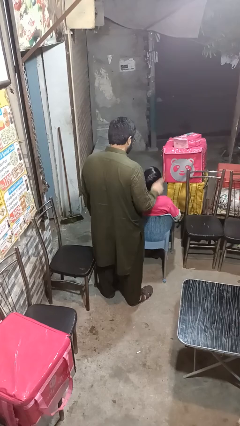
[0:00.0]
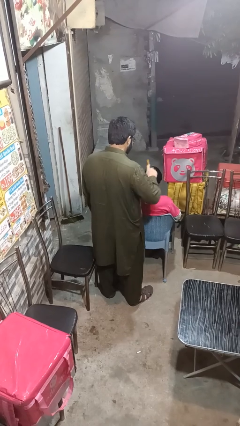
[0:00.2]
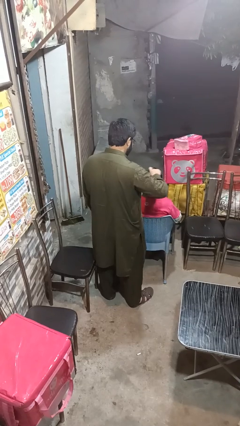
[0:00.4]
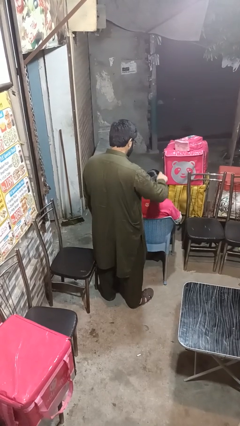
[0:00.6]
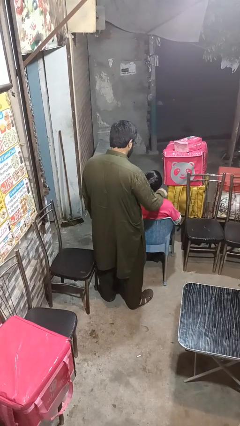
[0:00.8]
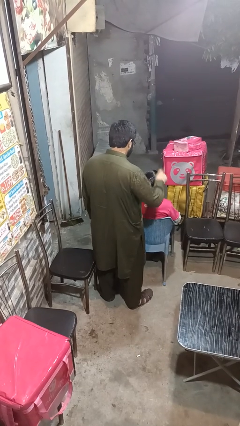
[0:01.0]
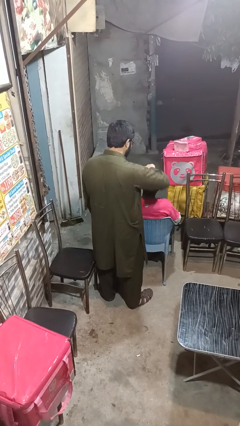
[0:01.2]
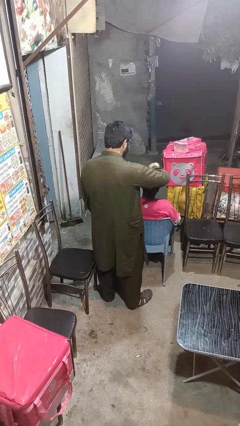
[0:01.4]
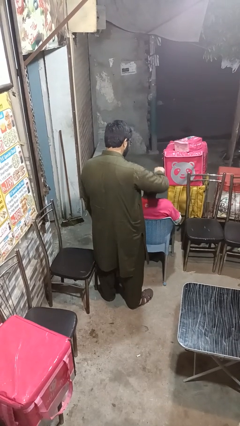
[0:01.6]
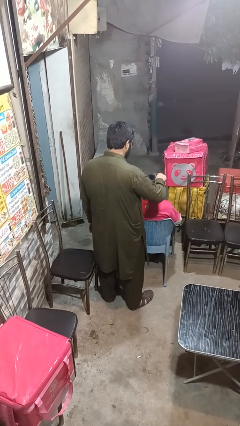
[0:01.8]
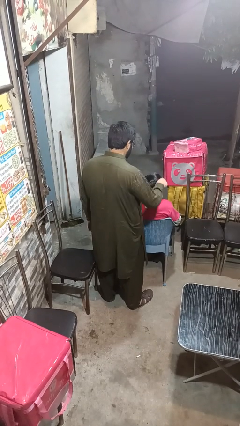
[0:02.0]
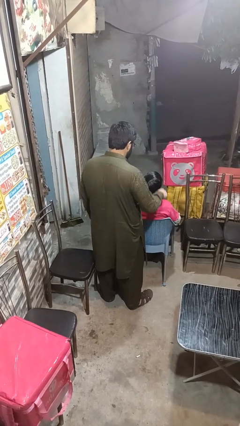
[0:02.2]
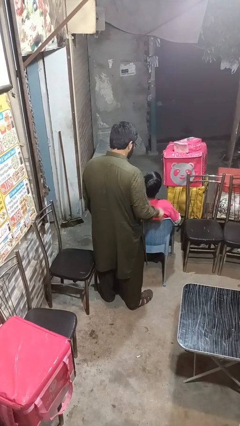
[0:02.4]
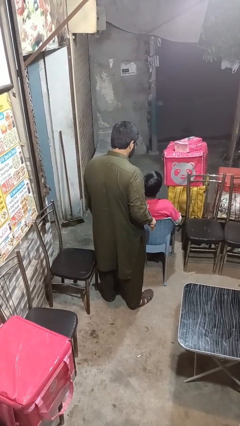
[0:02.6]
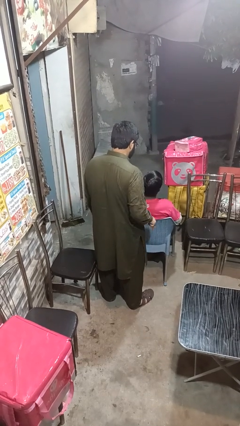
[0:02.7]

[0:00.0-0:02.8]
person brushes hair of person

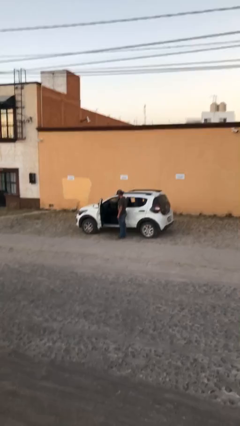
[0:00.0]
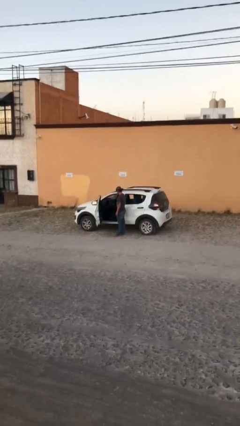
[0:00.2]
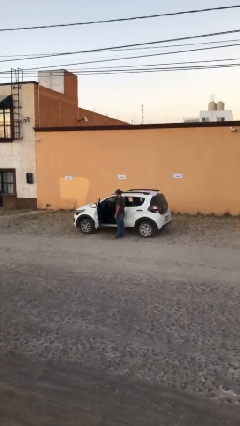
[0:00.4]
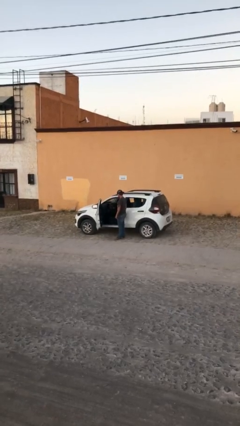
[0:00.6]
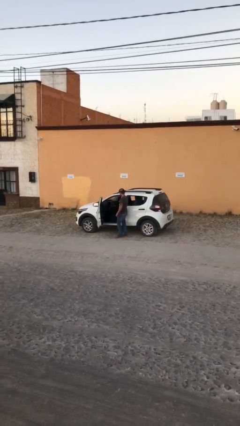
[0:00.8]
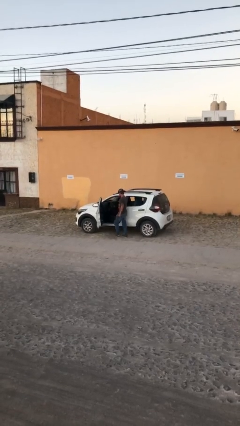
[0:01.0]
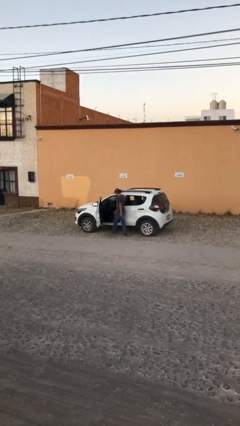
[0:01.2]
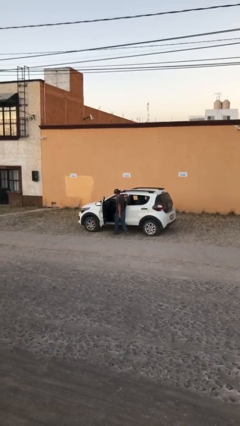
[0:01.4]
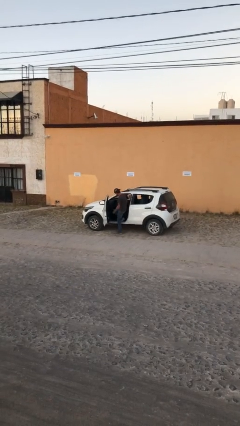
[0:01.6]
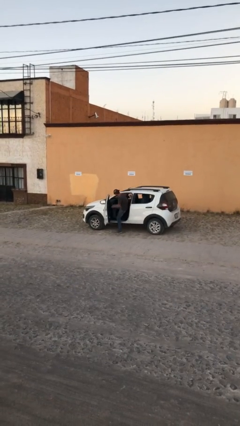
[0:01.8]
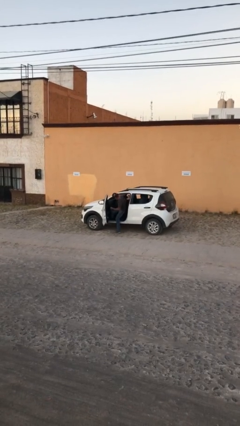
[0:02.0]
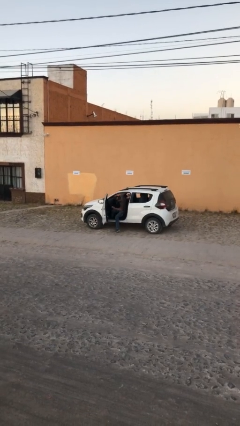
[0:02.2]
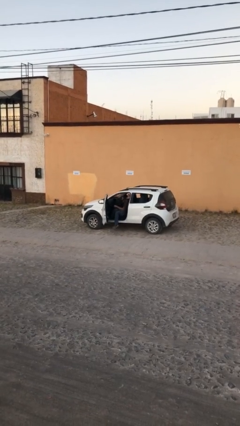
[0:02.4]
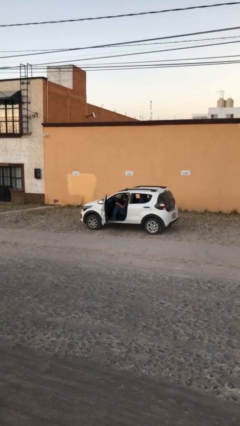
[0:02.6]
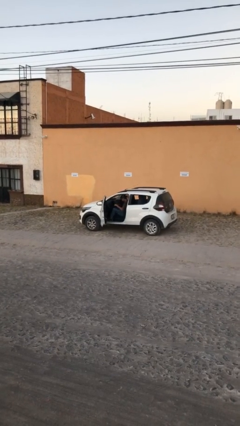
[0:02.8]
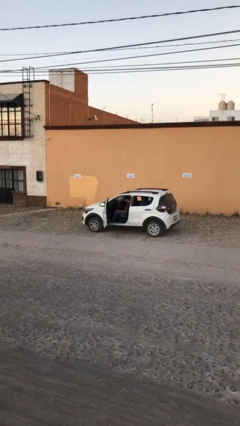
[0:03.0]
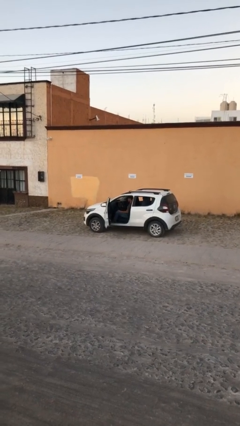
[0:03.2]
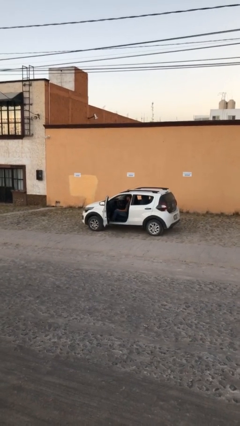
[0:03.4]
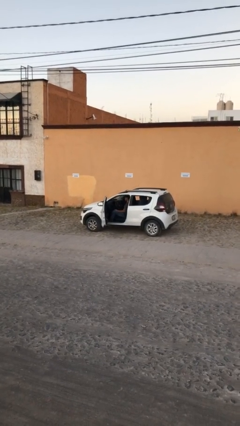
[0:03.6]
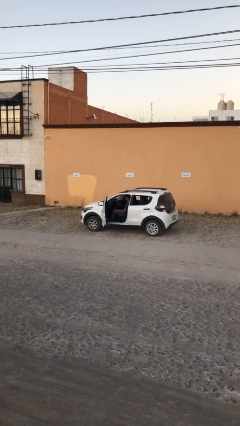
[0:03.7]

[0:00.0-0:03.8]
person enters car

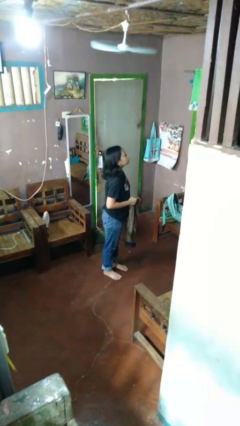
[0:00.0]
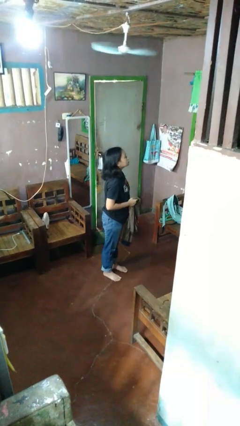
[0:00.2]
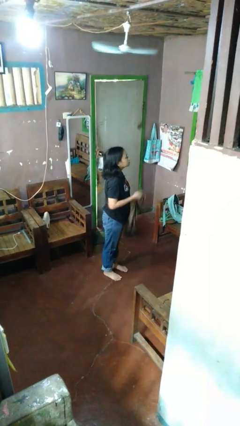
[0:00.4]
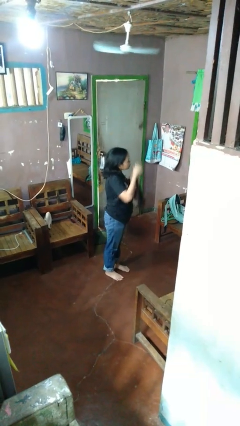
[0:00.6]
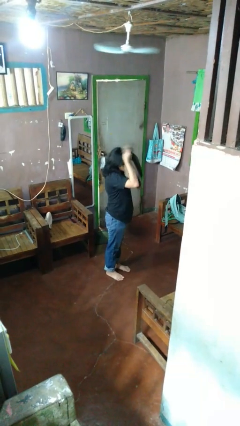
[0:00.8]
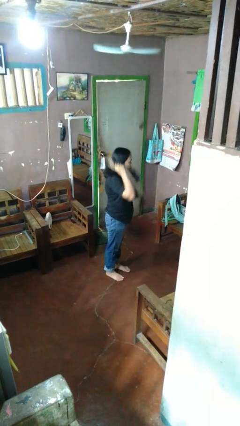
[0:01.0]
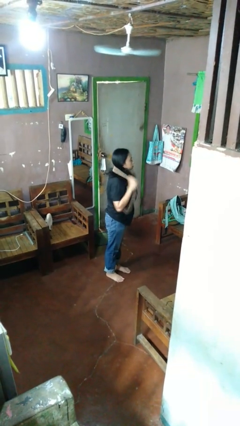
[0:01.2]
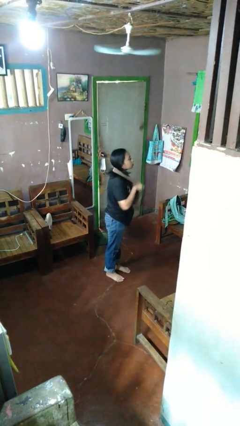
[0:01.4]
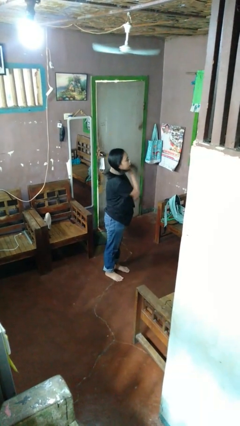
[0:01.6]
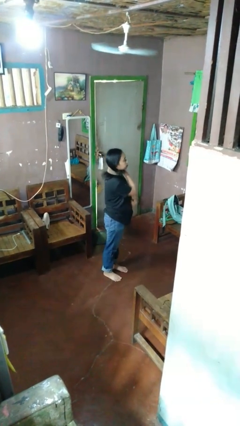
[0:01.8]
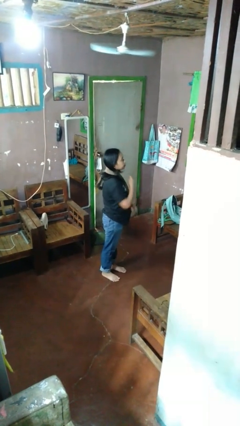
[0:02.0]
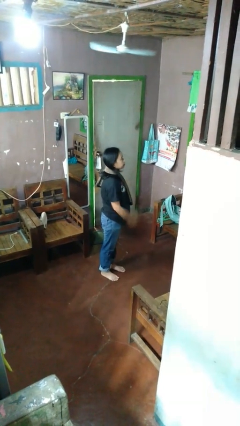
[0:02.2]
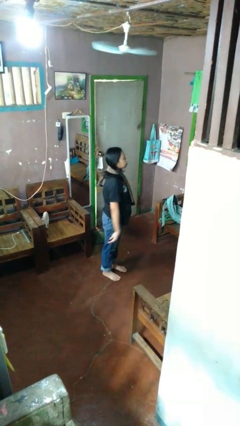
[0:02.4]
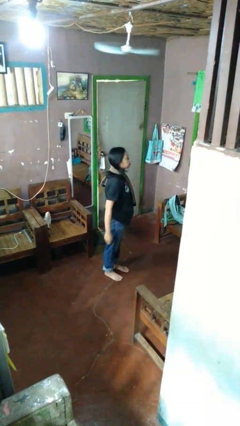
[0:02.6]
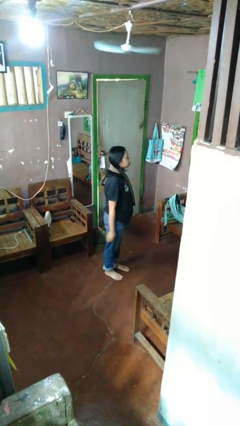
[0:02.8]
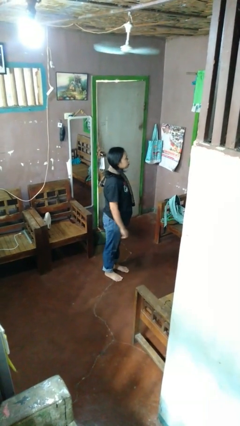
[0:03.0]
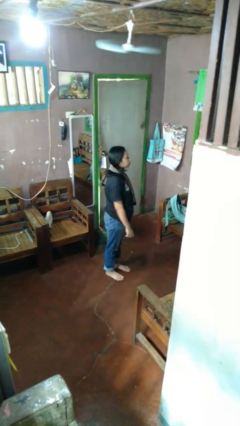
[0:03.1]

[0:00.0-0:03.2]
person puts on scarf

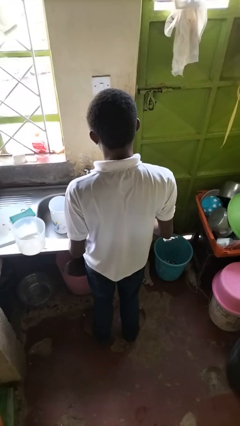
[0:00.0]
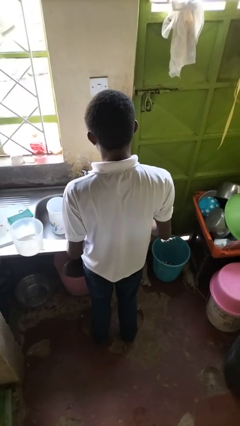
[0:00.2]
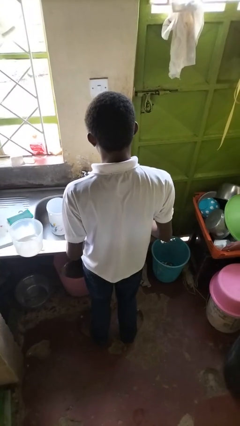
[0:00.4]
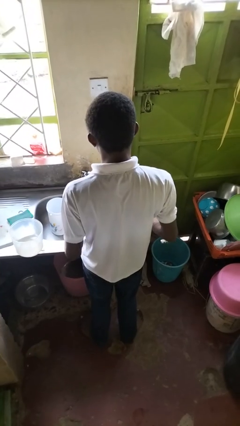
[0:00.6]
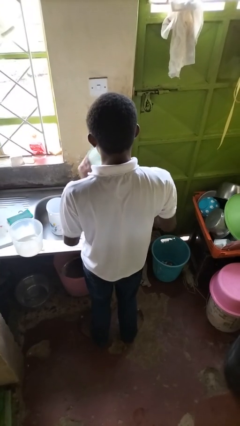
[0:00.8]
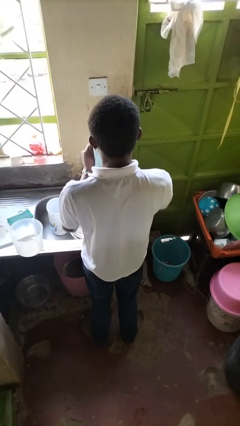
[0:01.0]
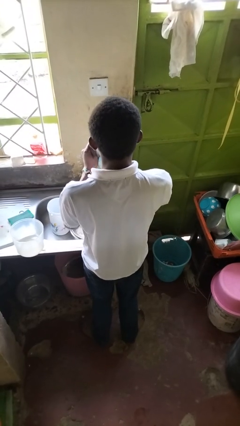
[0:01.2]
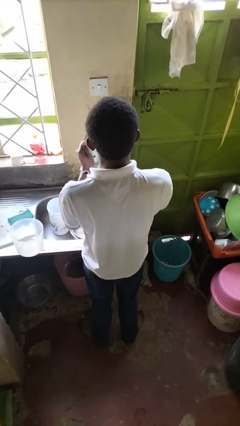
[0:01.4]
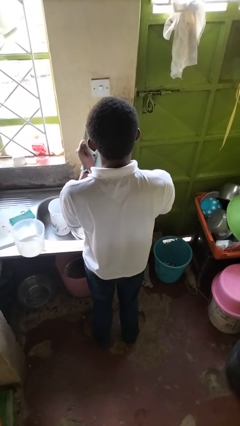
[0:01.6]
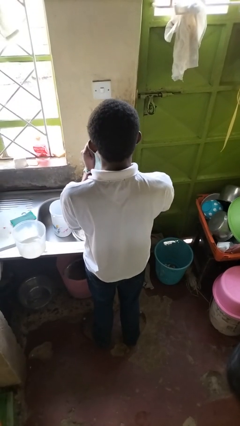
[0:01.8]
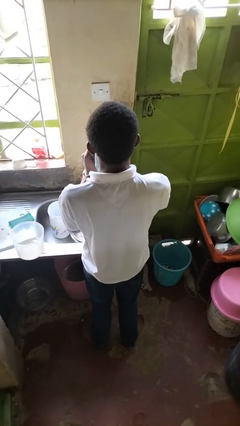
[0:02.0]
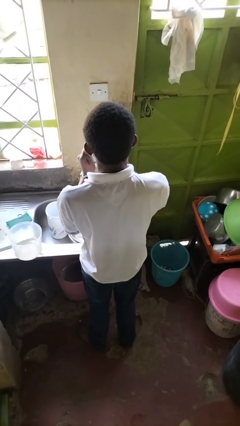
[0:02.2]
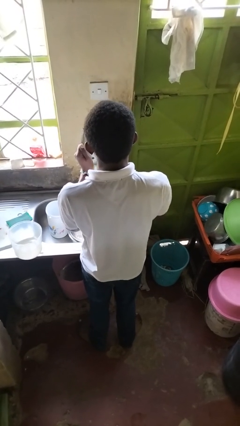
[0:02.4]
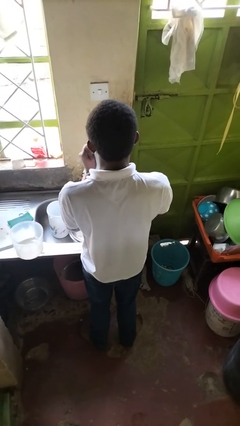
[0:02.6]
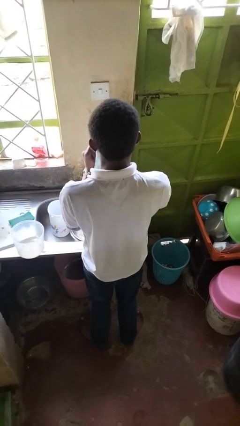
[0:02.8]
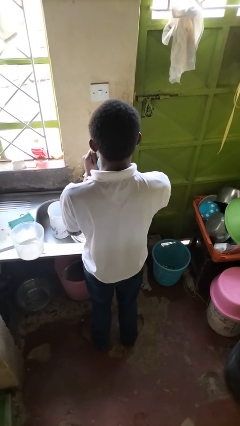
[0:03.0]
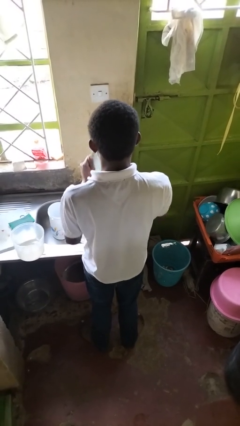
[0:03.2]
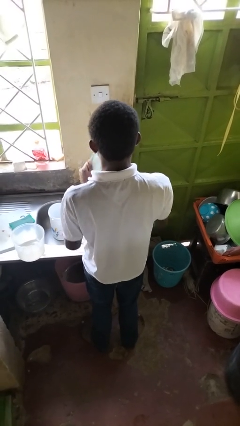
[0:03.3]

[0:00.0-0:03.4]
person dries dish

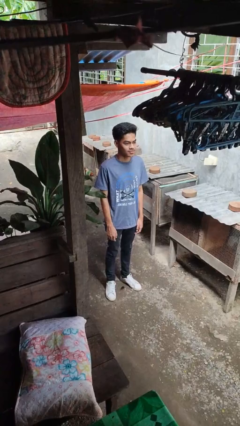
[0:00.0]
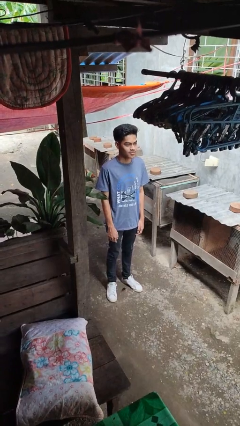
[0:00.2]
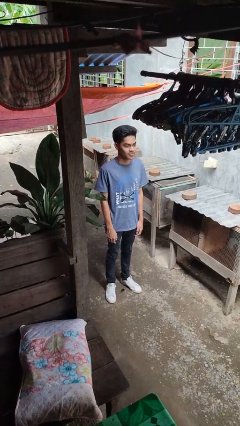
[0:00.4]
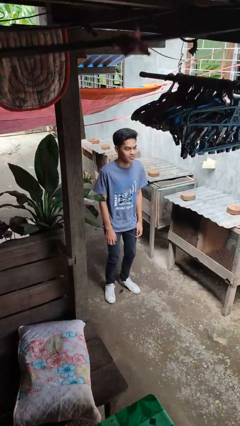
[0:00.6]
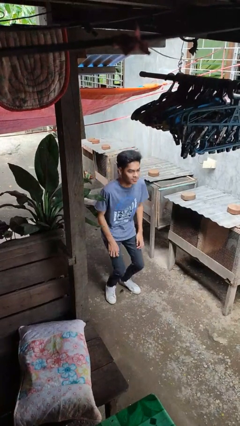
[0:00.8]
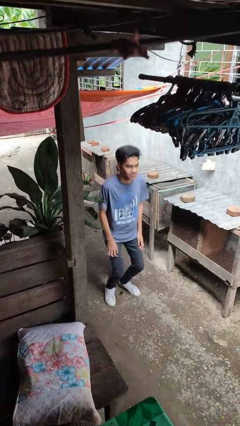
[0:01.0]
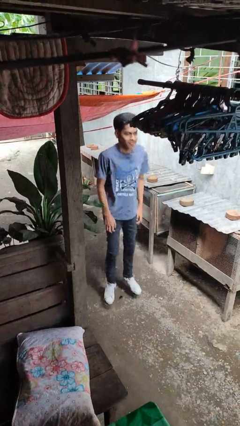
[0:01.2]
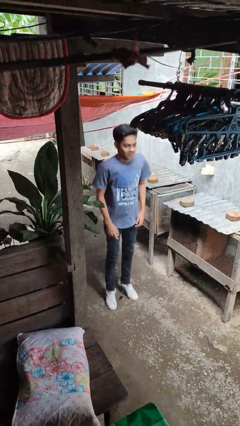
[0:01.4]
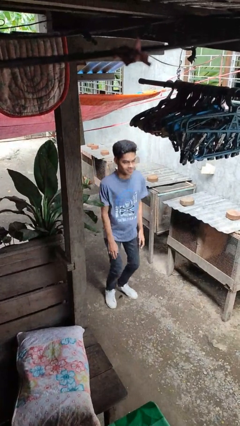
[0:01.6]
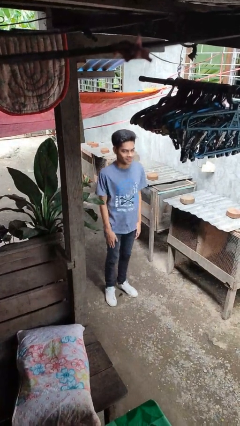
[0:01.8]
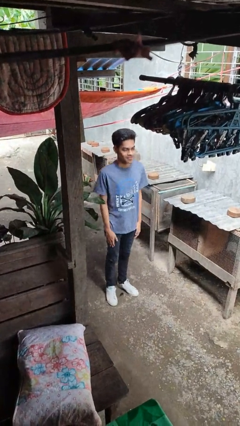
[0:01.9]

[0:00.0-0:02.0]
person jumps

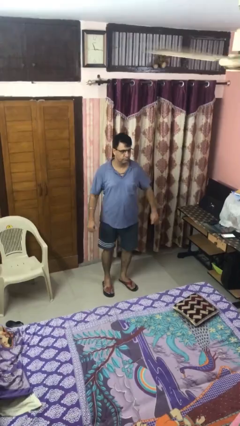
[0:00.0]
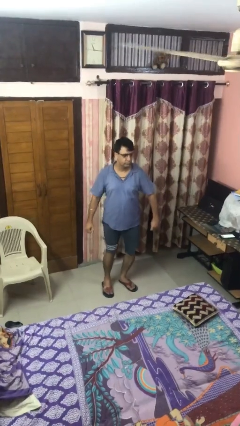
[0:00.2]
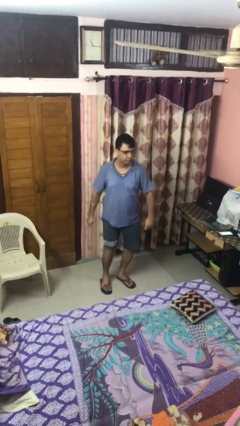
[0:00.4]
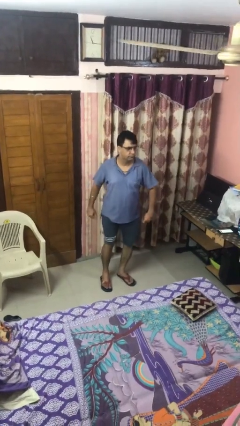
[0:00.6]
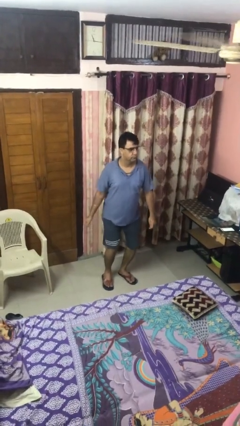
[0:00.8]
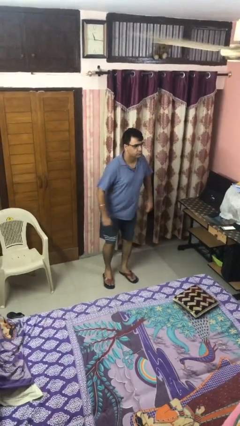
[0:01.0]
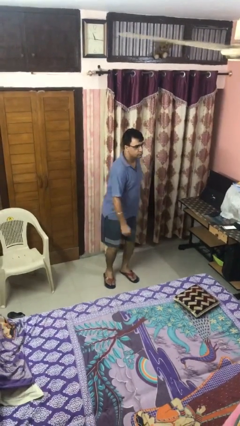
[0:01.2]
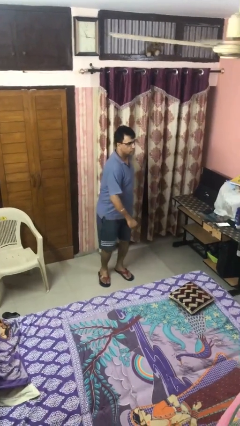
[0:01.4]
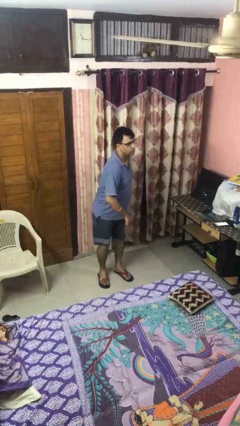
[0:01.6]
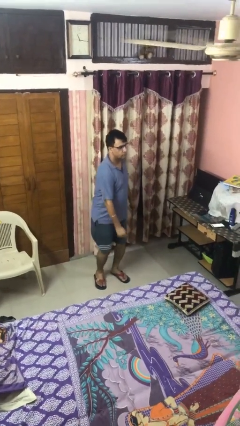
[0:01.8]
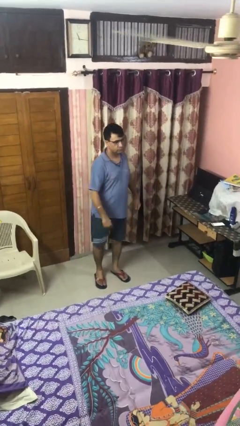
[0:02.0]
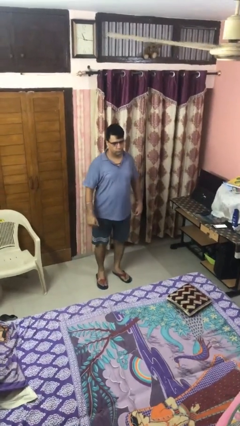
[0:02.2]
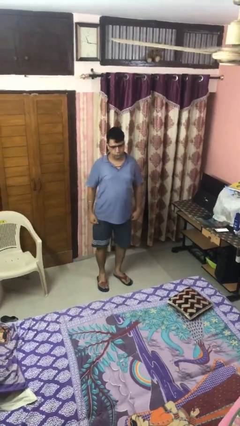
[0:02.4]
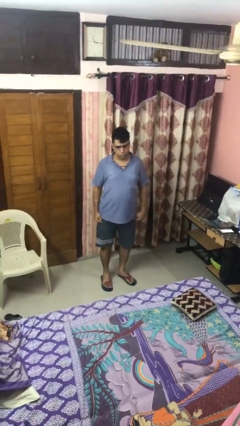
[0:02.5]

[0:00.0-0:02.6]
person dances in place
